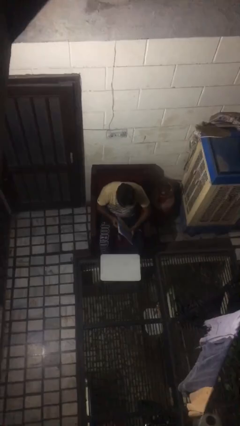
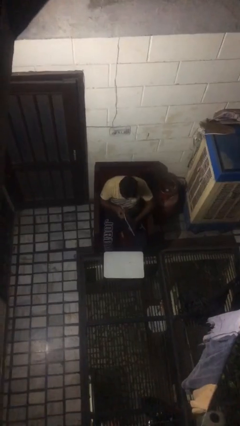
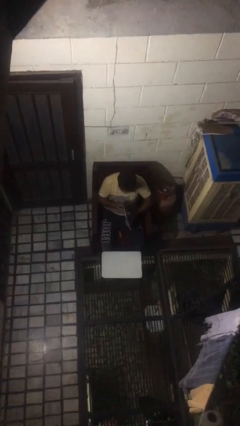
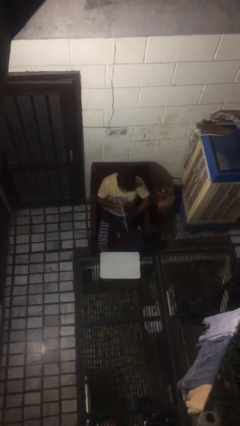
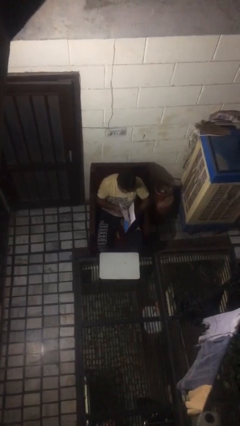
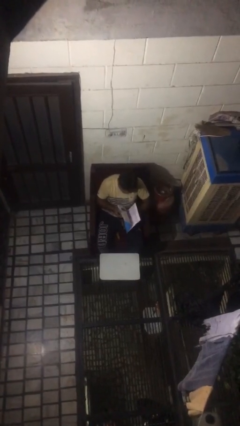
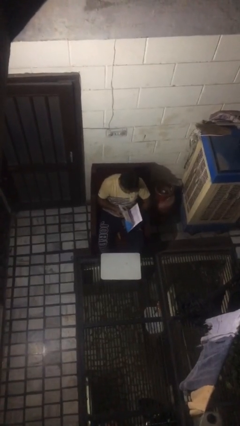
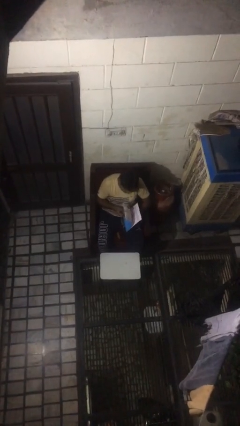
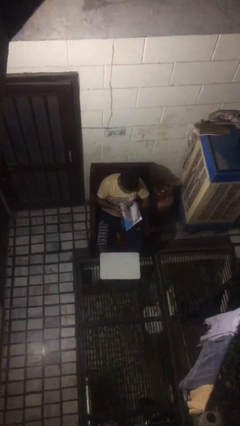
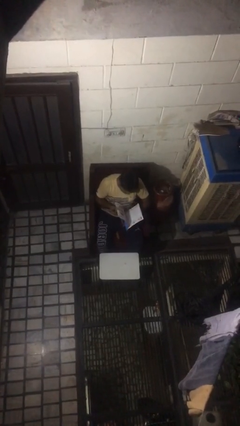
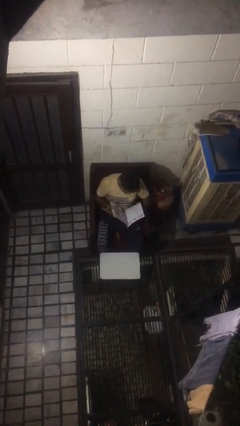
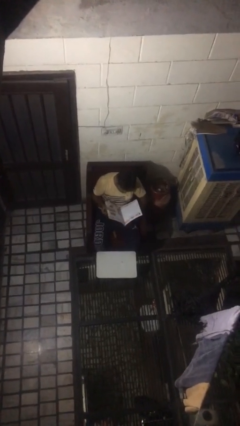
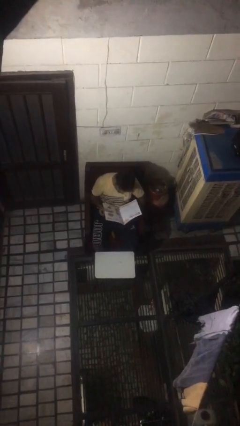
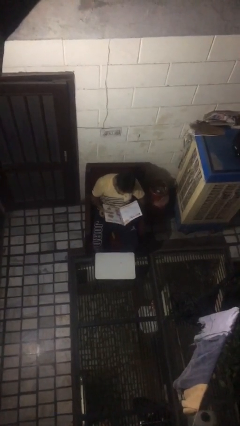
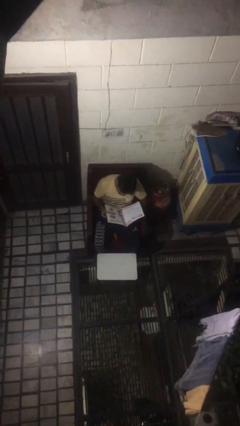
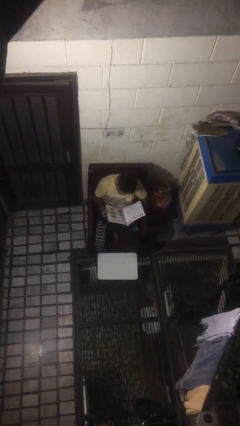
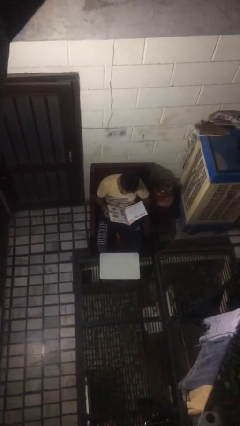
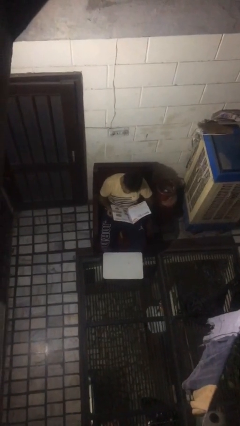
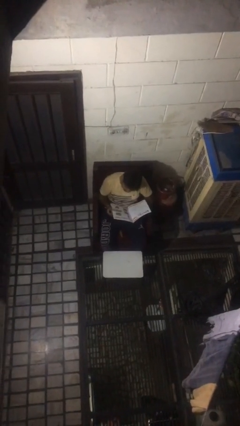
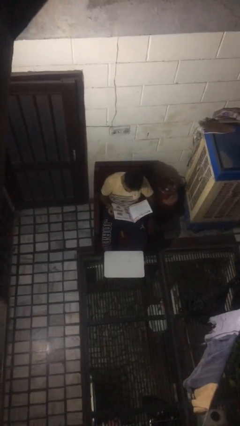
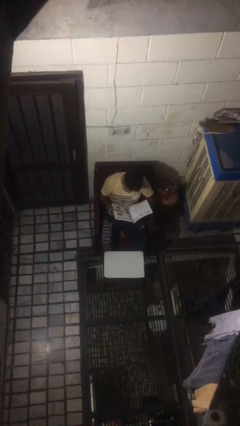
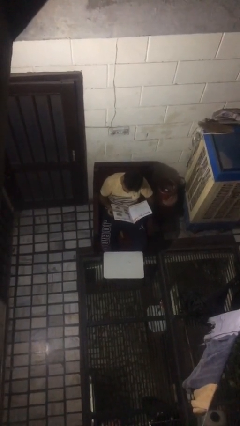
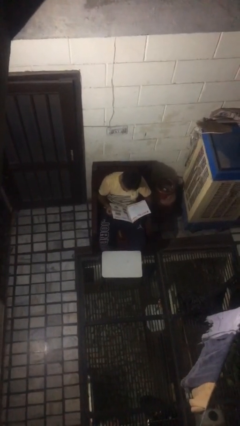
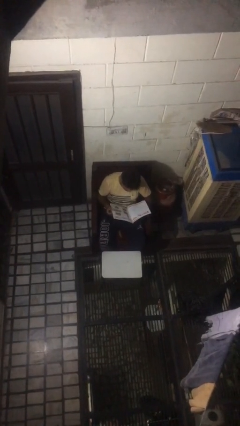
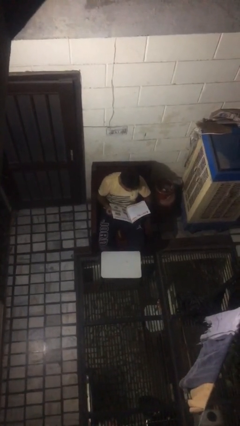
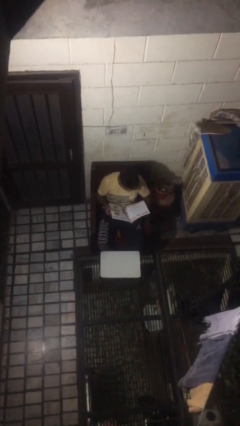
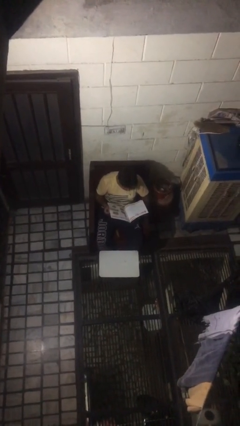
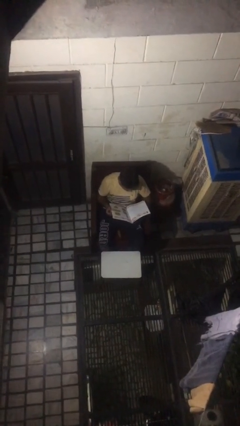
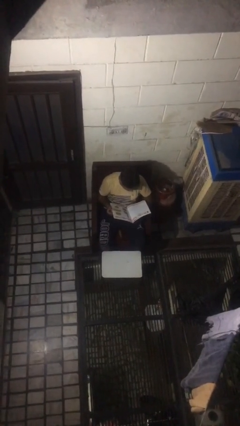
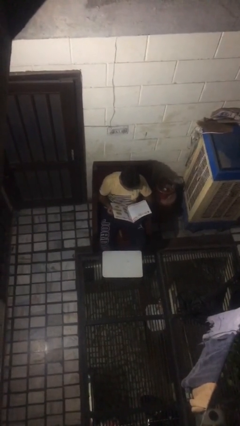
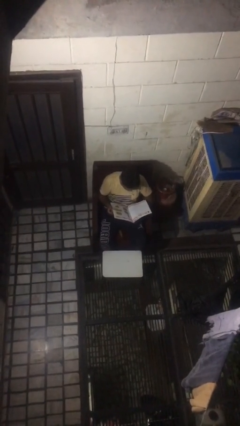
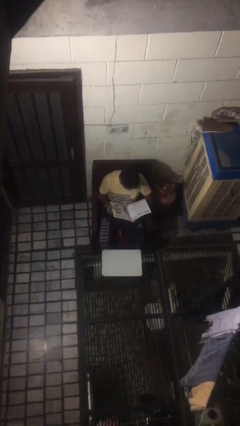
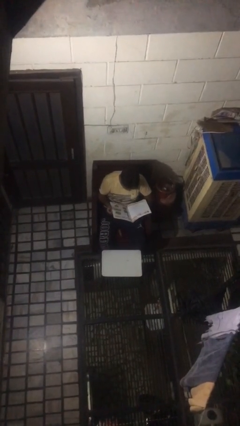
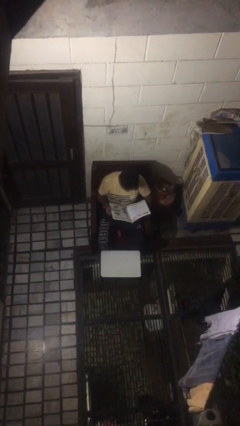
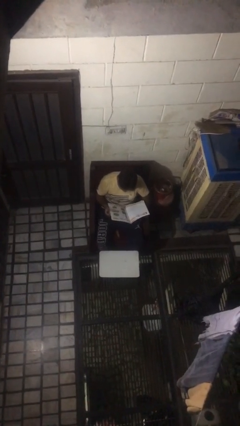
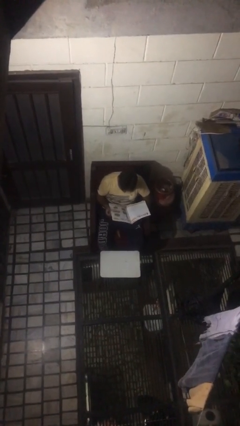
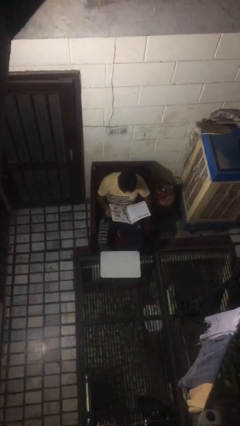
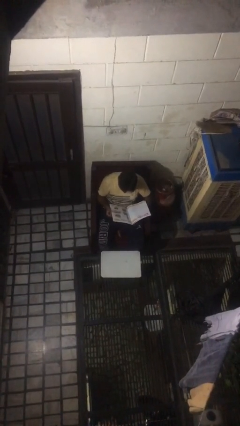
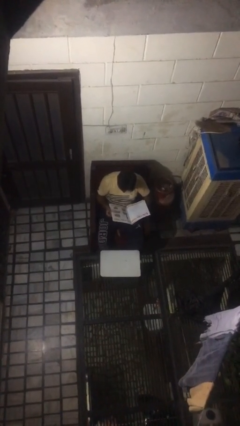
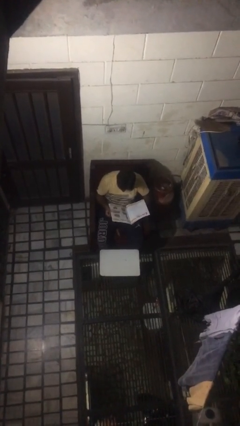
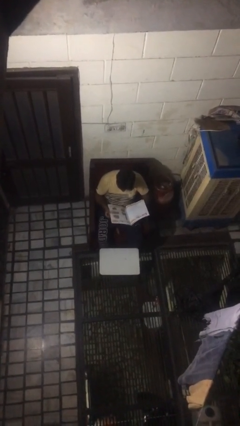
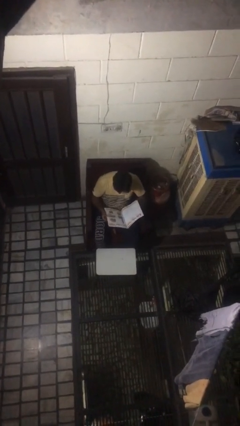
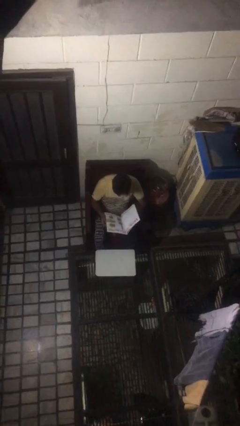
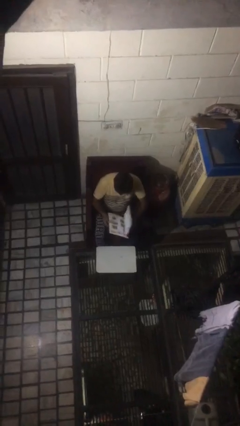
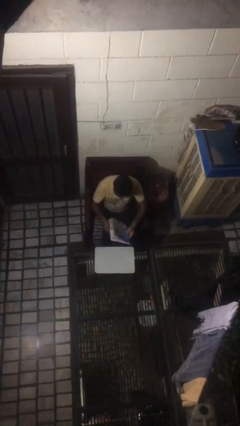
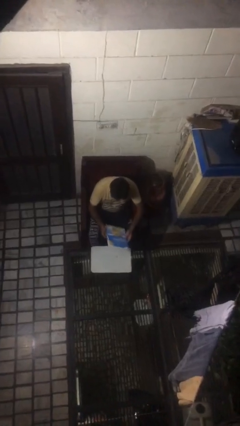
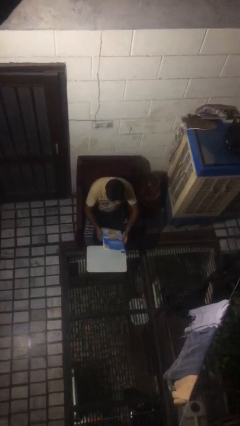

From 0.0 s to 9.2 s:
person reads document

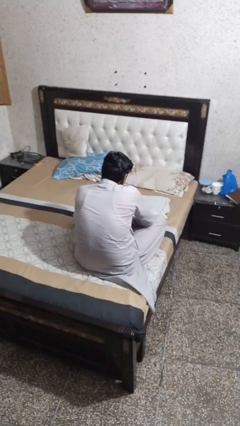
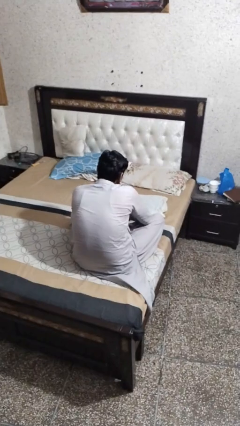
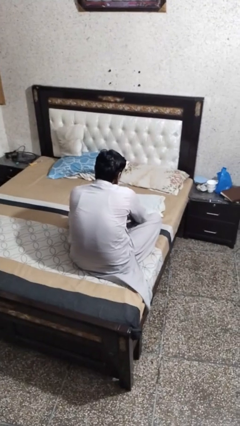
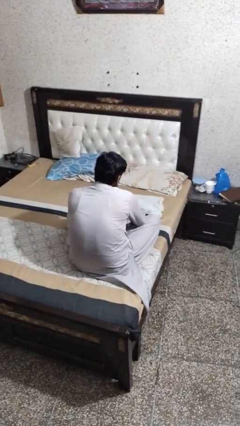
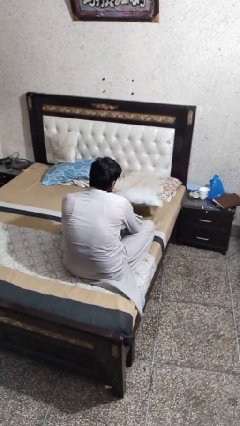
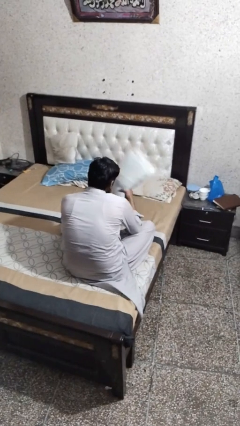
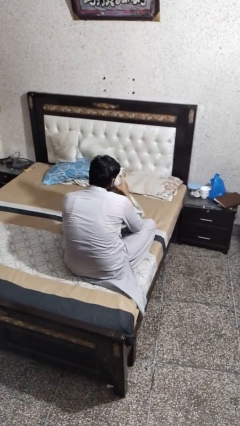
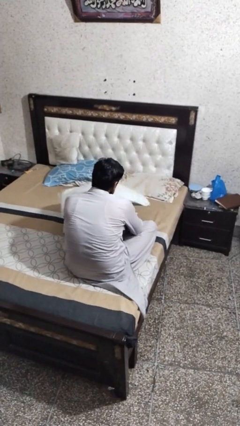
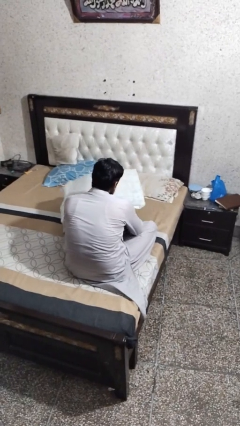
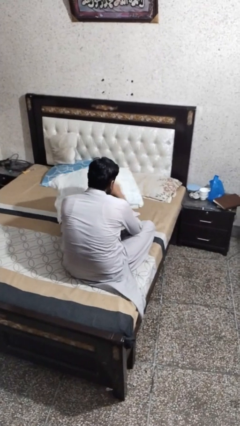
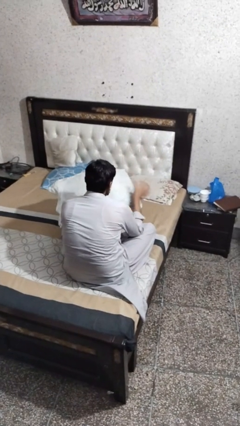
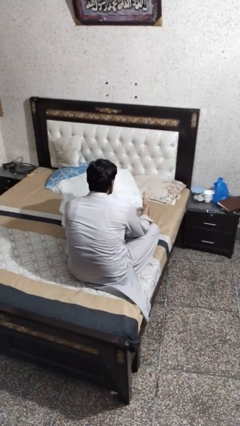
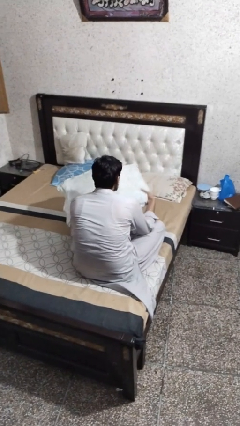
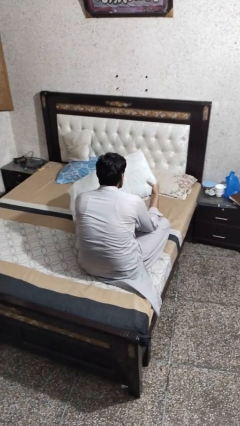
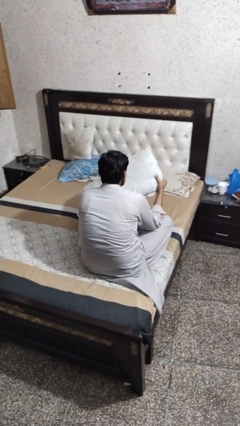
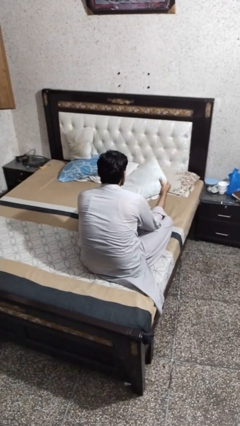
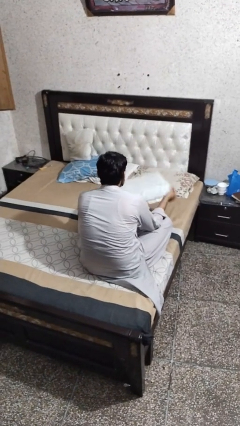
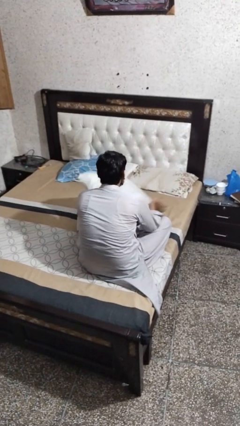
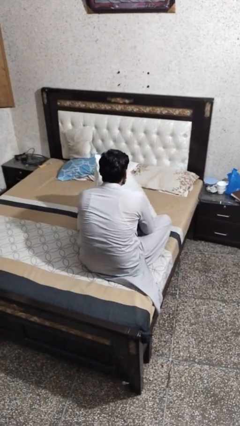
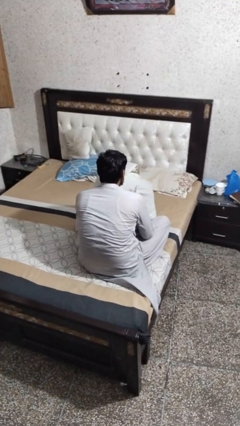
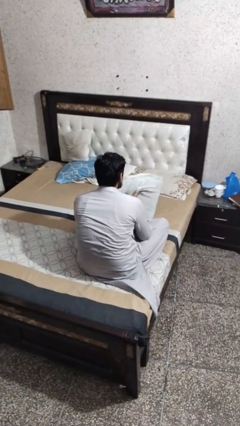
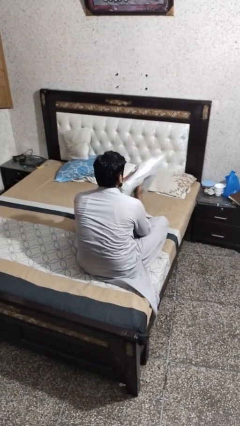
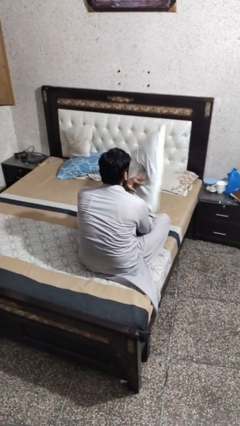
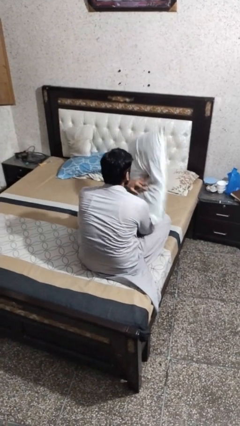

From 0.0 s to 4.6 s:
person picks up object from bed

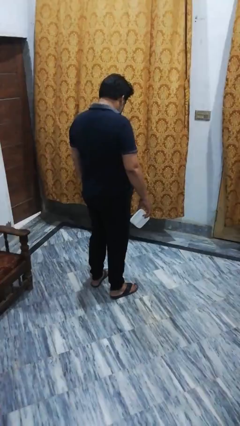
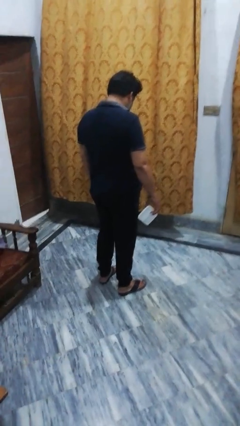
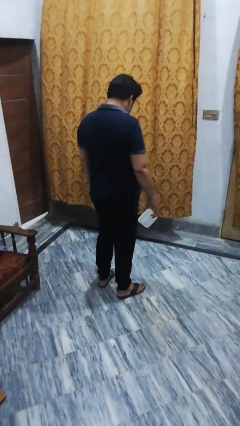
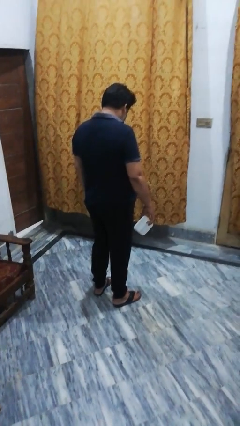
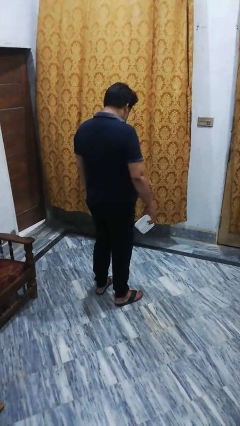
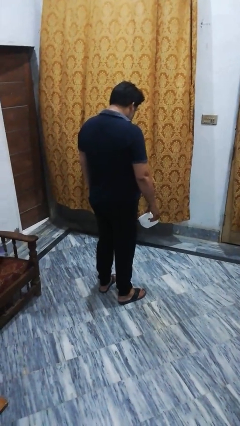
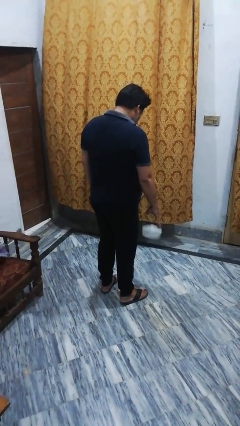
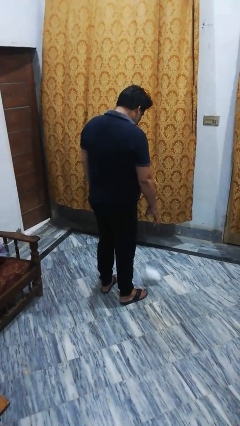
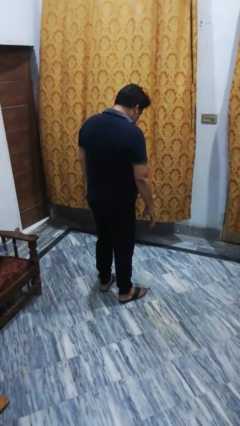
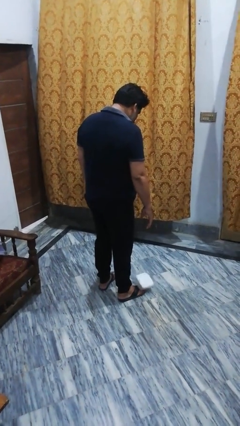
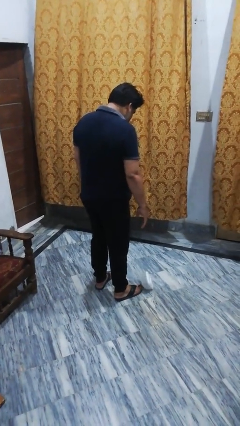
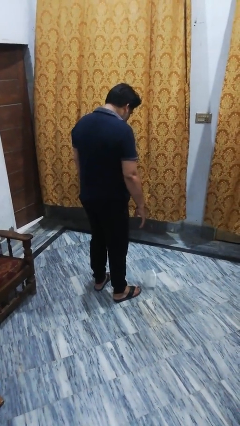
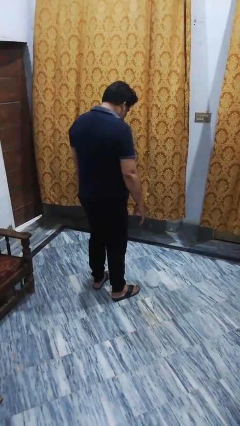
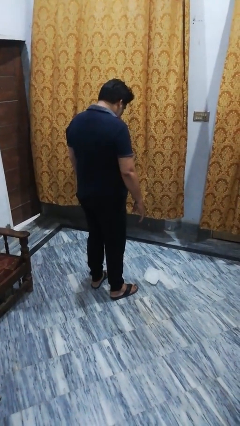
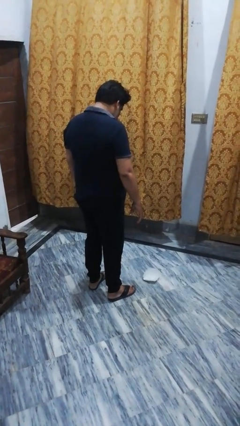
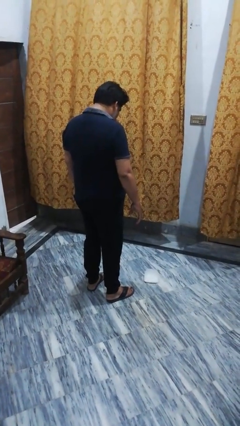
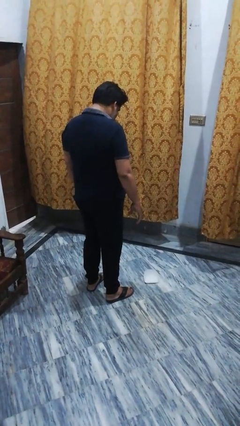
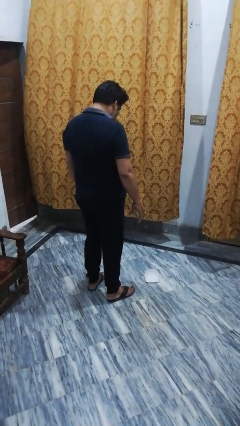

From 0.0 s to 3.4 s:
person throws object to ground

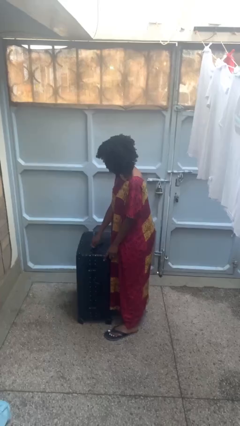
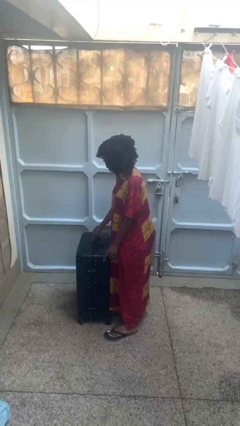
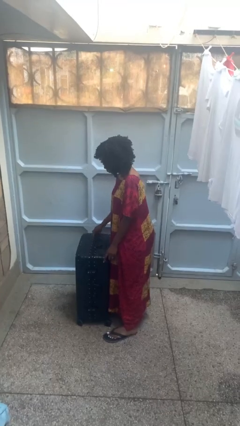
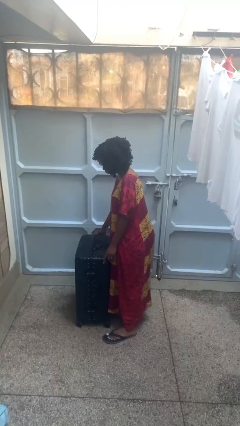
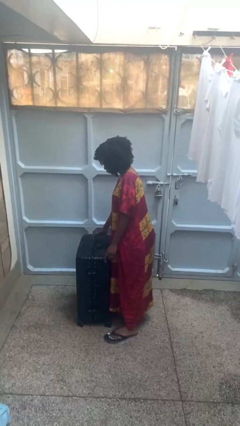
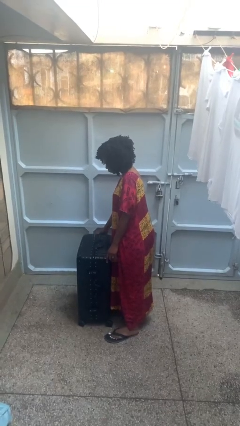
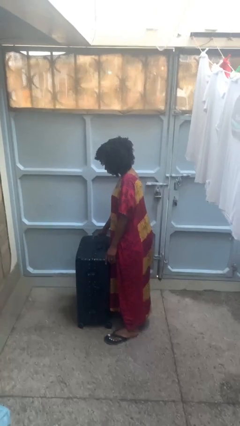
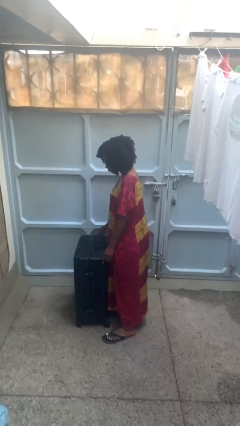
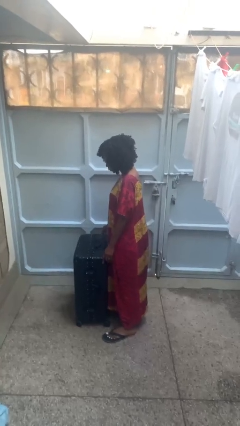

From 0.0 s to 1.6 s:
person closes suitcase
